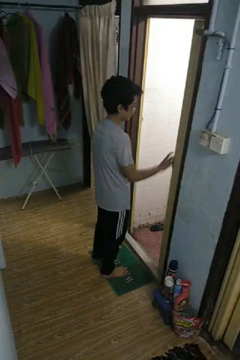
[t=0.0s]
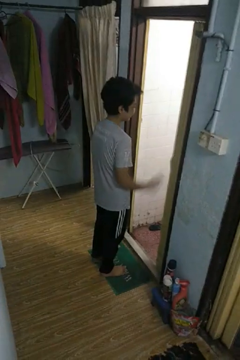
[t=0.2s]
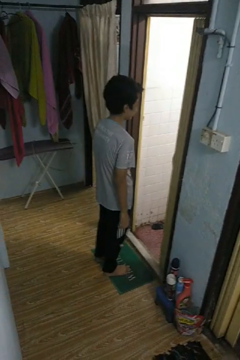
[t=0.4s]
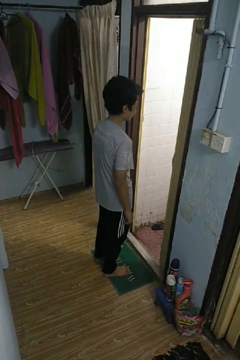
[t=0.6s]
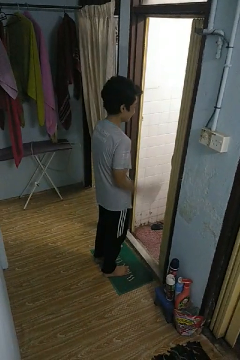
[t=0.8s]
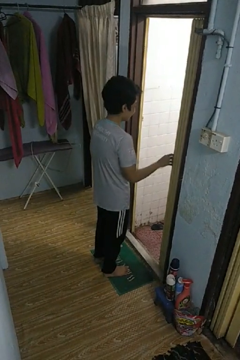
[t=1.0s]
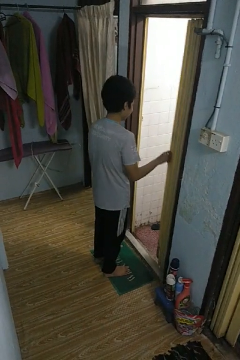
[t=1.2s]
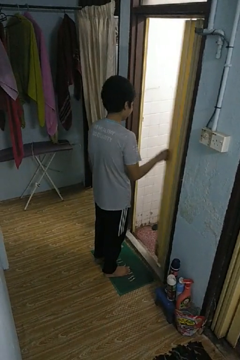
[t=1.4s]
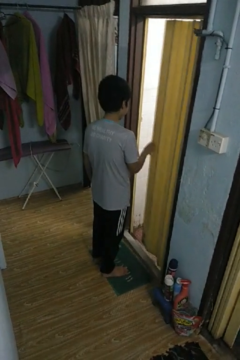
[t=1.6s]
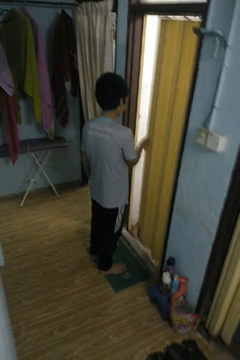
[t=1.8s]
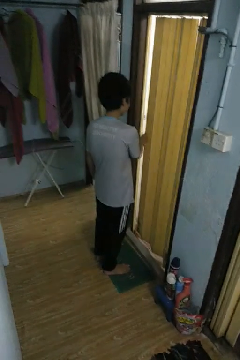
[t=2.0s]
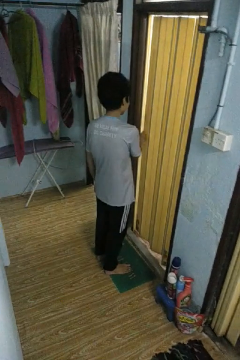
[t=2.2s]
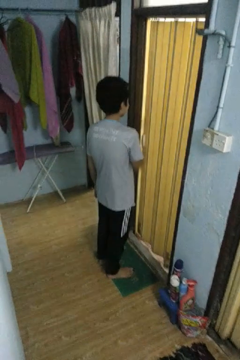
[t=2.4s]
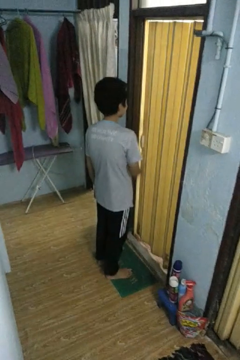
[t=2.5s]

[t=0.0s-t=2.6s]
person closes sliding door

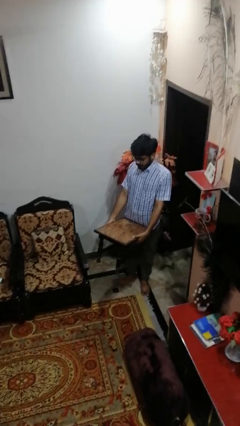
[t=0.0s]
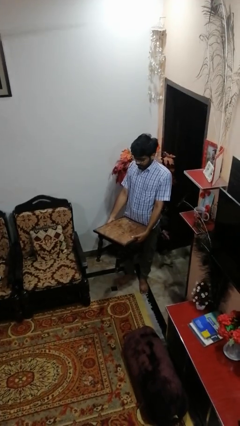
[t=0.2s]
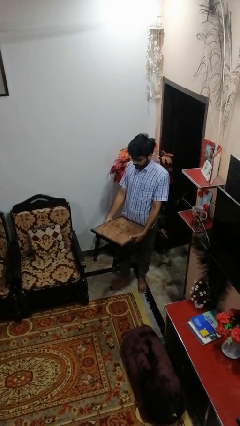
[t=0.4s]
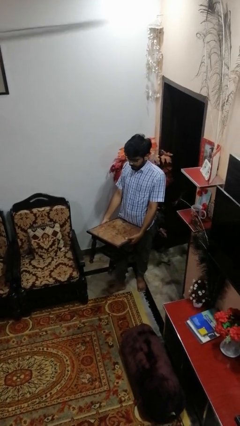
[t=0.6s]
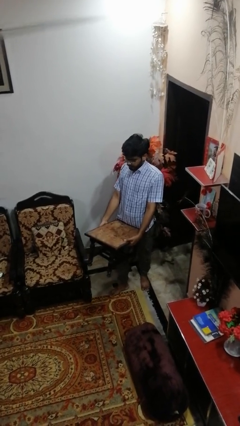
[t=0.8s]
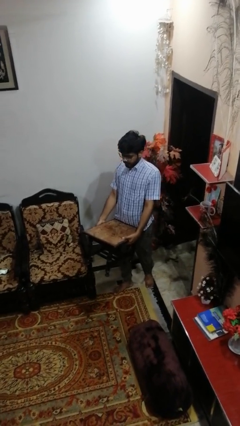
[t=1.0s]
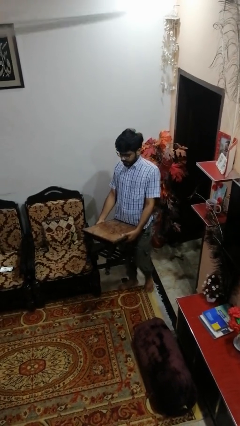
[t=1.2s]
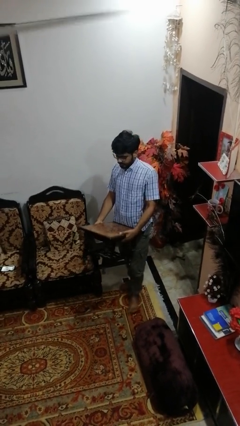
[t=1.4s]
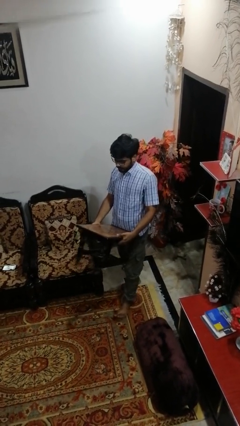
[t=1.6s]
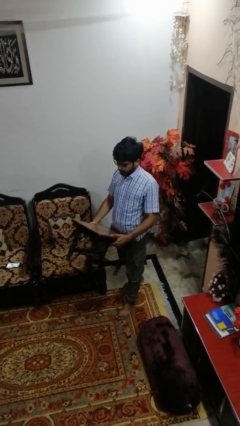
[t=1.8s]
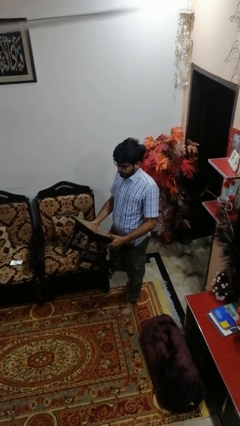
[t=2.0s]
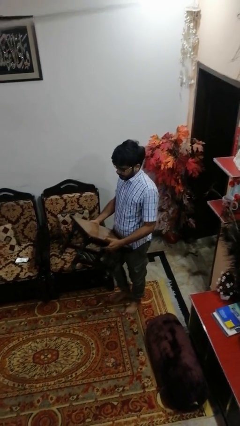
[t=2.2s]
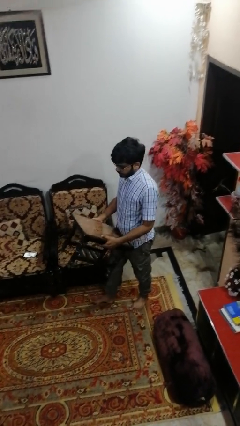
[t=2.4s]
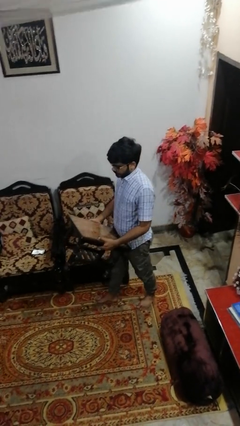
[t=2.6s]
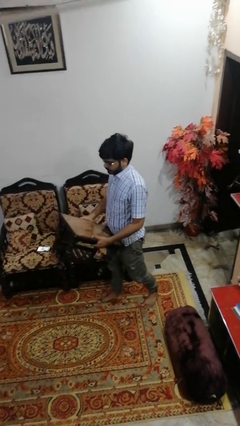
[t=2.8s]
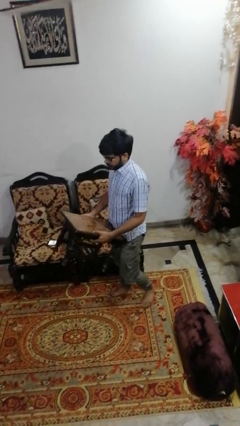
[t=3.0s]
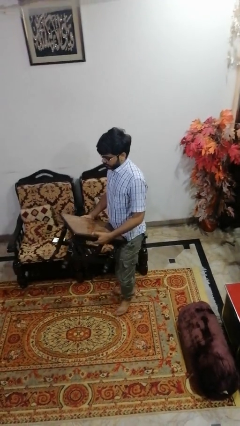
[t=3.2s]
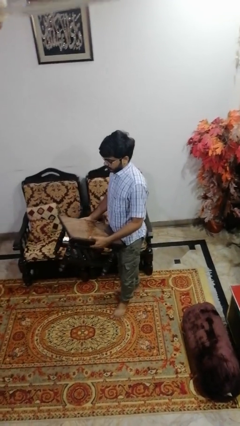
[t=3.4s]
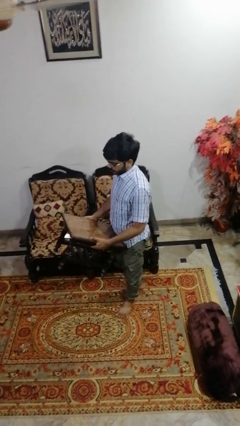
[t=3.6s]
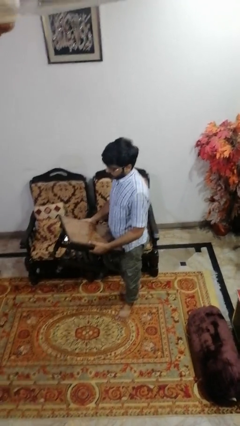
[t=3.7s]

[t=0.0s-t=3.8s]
person carries furniture

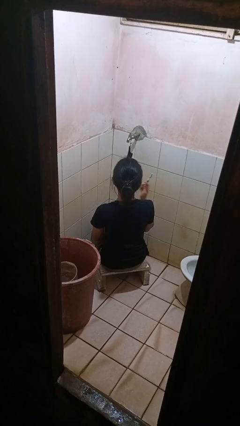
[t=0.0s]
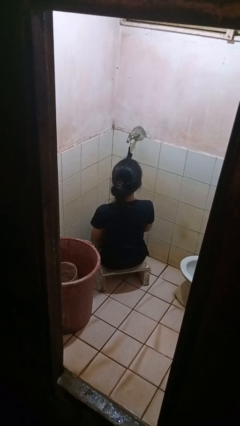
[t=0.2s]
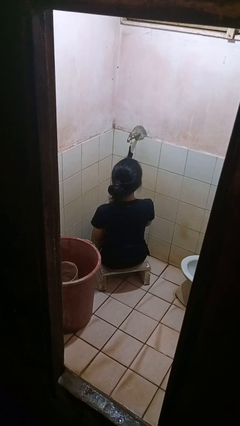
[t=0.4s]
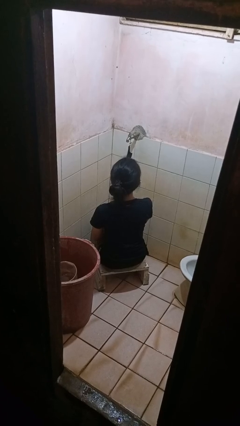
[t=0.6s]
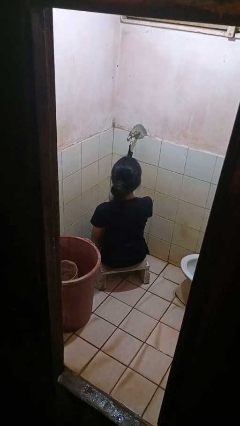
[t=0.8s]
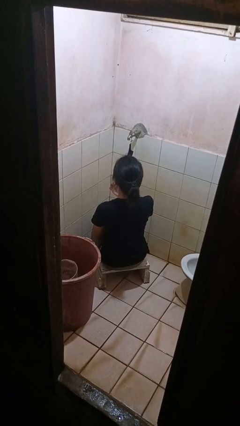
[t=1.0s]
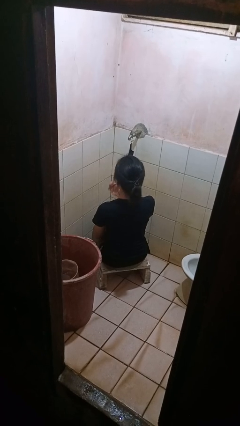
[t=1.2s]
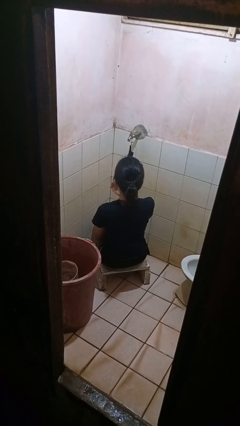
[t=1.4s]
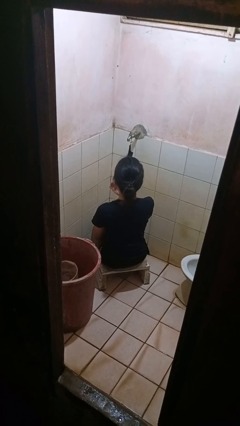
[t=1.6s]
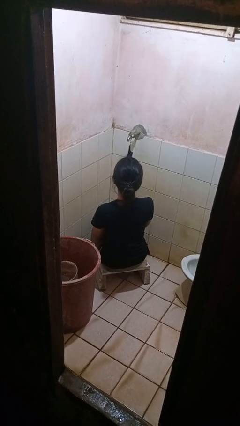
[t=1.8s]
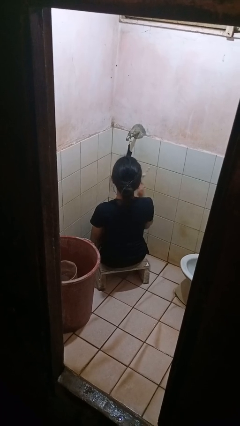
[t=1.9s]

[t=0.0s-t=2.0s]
person brushes teeth

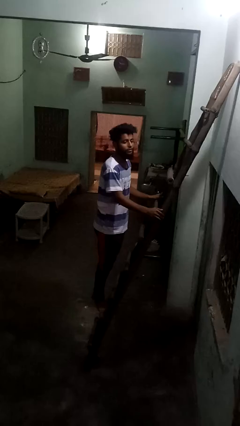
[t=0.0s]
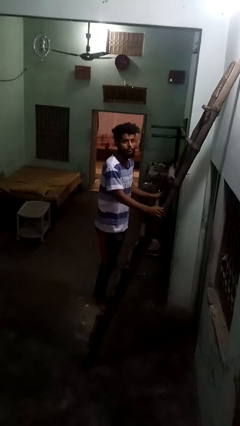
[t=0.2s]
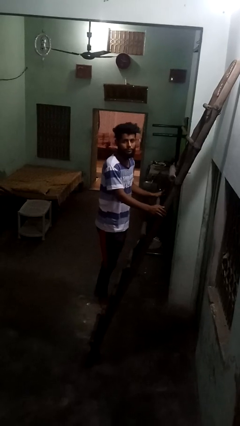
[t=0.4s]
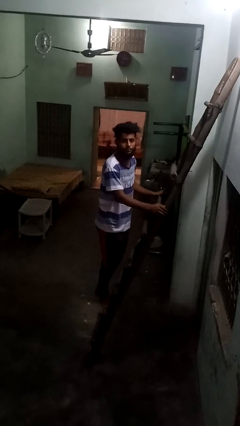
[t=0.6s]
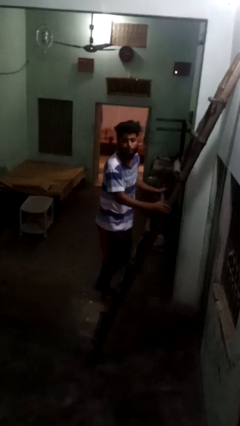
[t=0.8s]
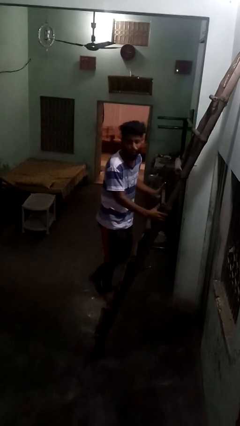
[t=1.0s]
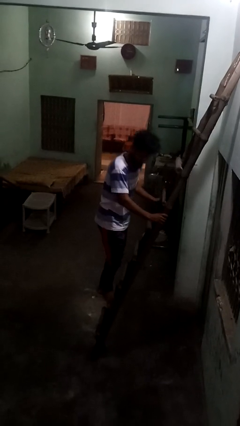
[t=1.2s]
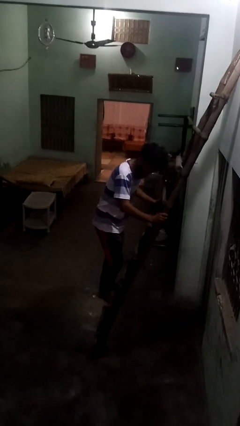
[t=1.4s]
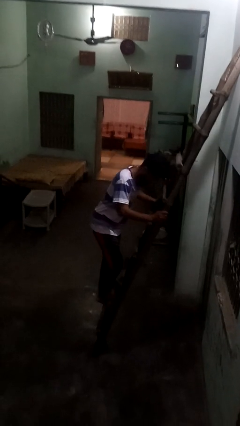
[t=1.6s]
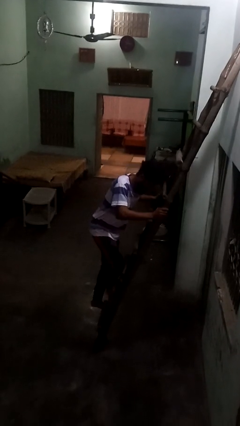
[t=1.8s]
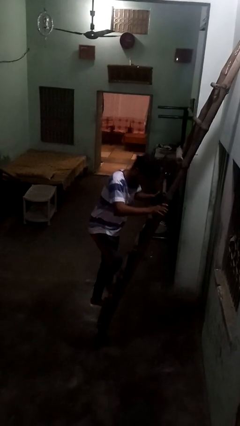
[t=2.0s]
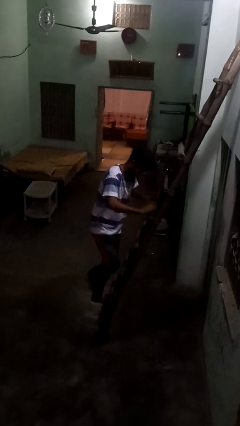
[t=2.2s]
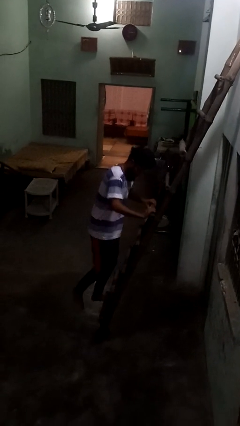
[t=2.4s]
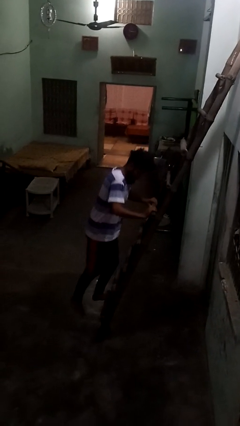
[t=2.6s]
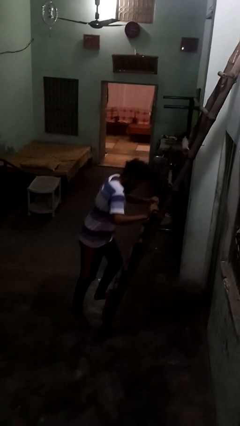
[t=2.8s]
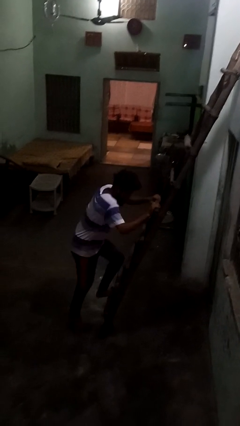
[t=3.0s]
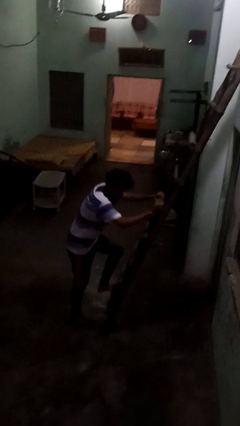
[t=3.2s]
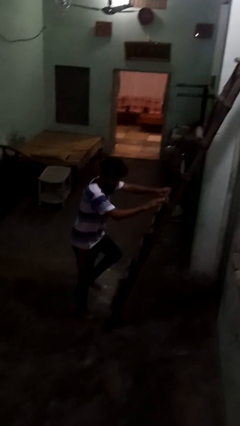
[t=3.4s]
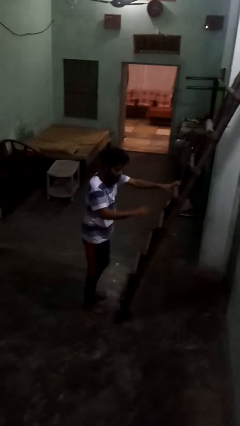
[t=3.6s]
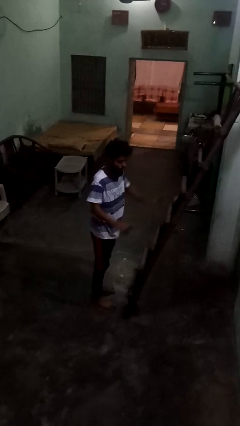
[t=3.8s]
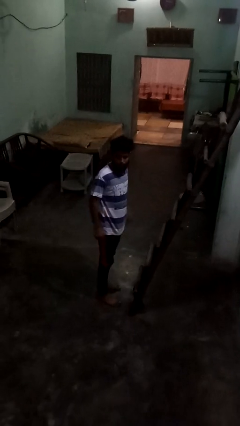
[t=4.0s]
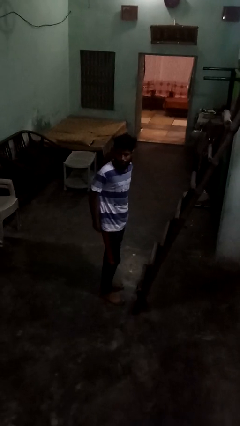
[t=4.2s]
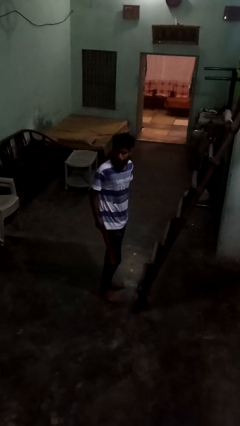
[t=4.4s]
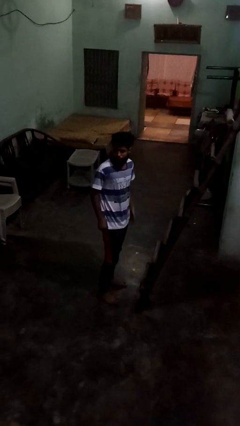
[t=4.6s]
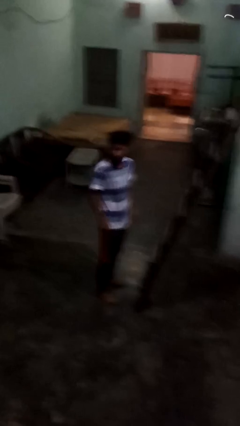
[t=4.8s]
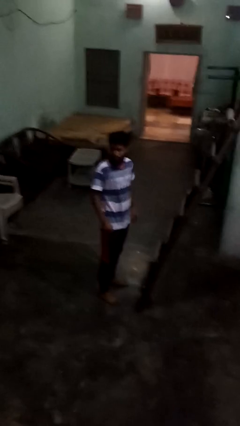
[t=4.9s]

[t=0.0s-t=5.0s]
person climbs down ladder

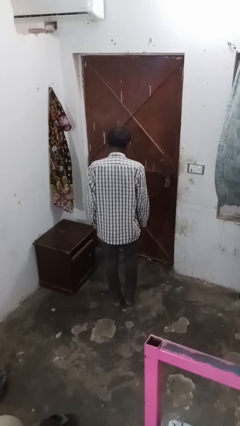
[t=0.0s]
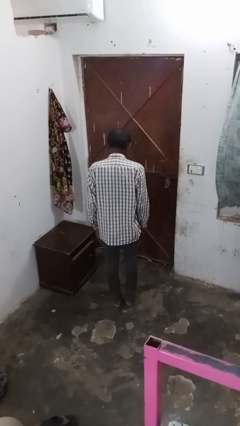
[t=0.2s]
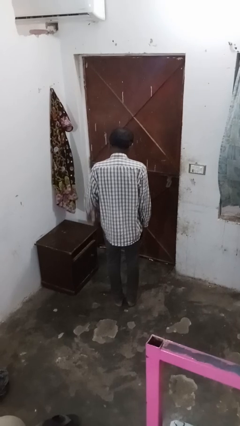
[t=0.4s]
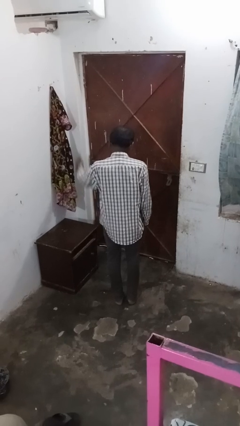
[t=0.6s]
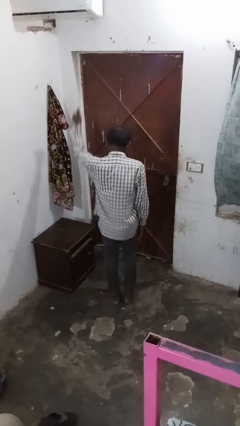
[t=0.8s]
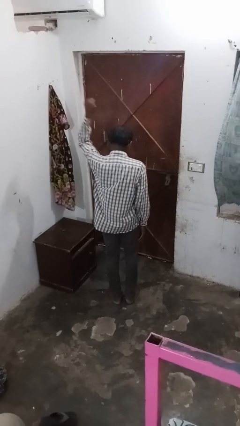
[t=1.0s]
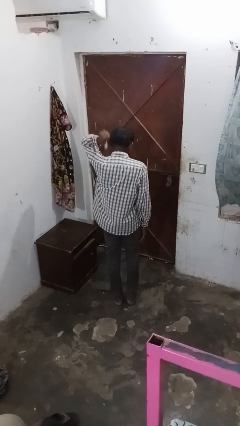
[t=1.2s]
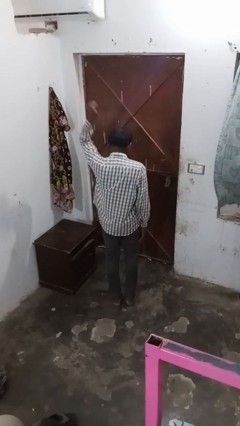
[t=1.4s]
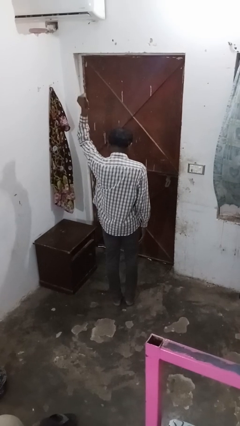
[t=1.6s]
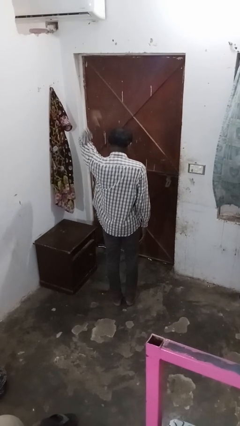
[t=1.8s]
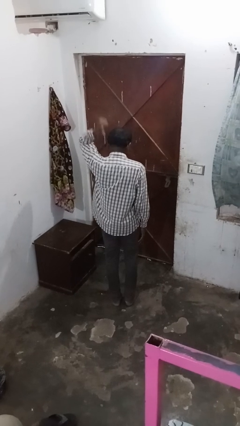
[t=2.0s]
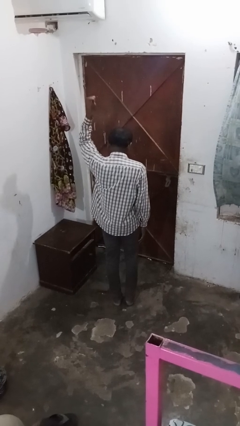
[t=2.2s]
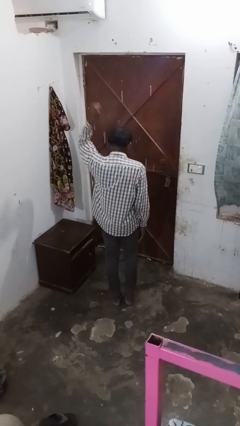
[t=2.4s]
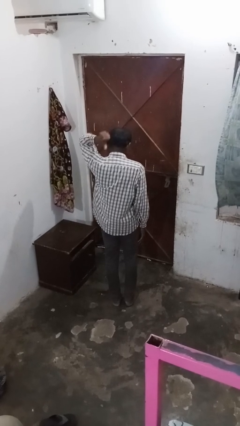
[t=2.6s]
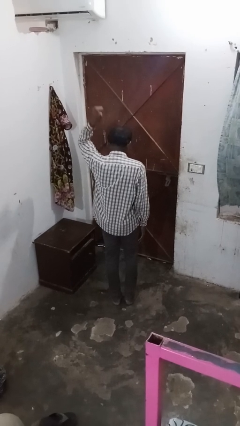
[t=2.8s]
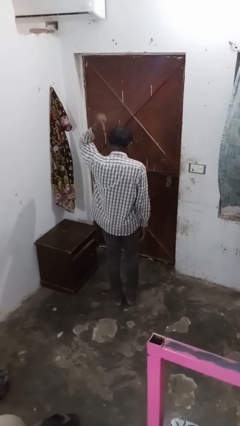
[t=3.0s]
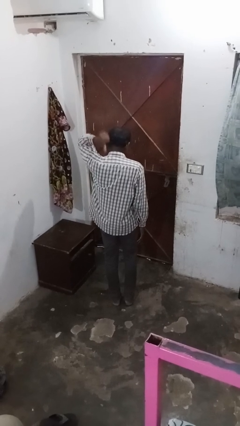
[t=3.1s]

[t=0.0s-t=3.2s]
person gestures behind me

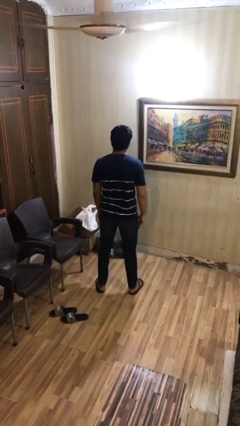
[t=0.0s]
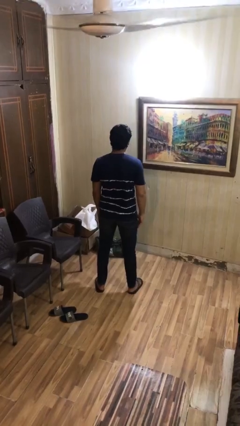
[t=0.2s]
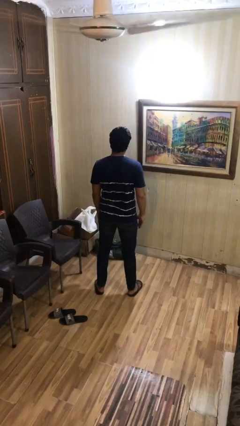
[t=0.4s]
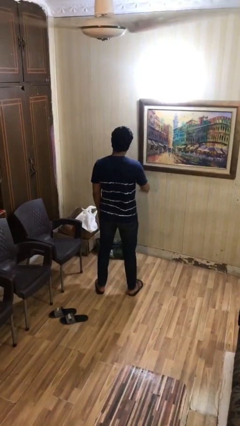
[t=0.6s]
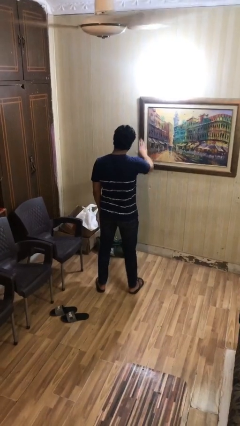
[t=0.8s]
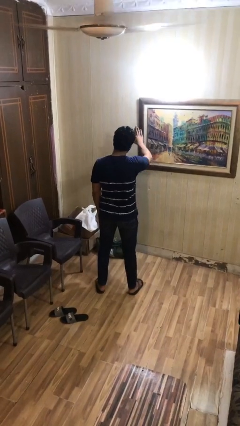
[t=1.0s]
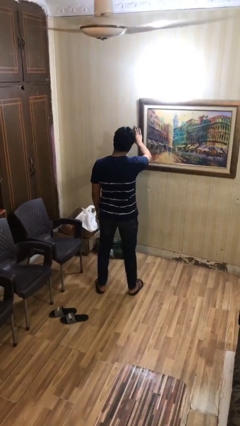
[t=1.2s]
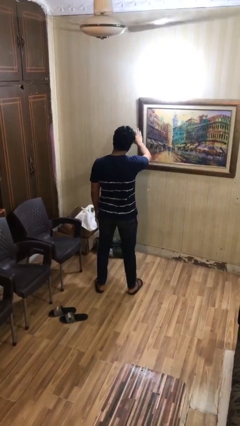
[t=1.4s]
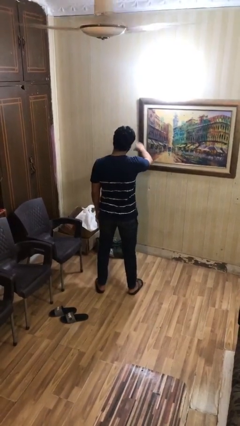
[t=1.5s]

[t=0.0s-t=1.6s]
person gestures stop

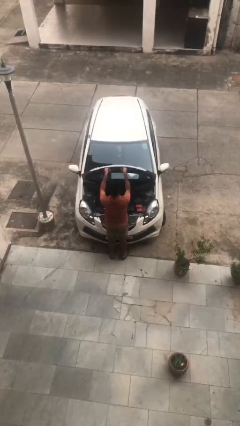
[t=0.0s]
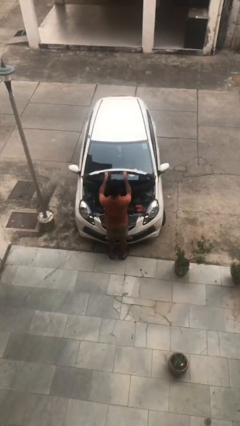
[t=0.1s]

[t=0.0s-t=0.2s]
person closes car hood
